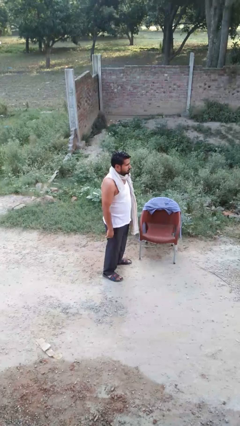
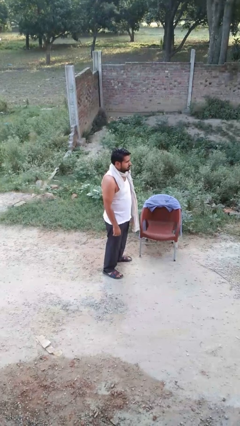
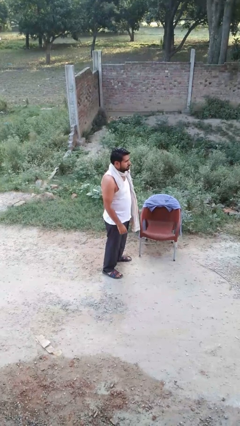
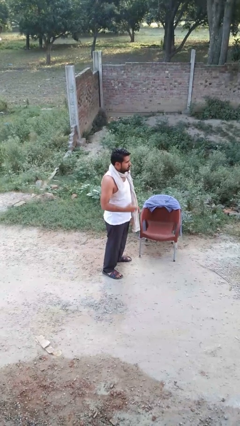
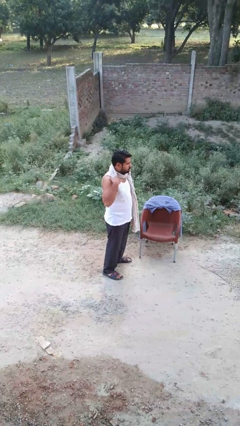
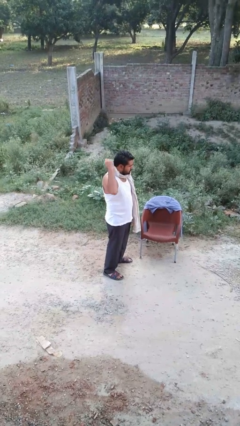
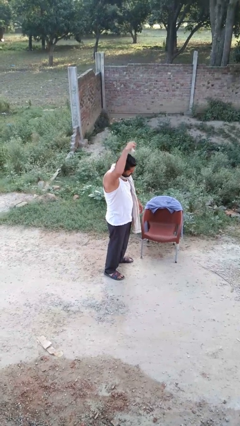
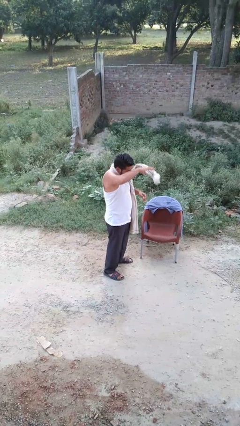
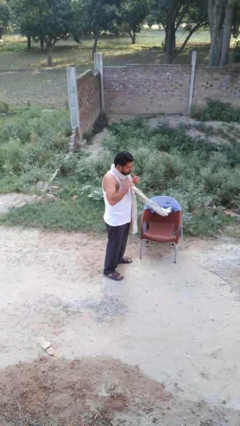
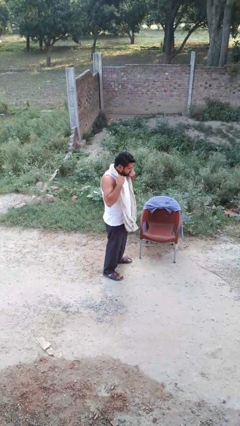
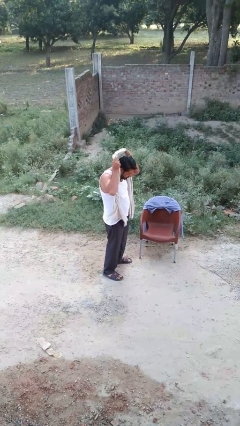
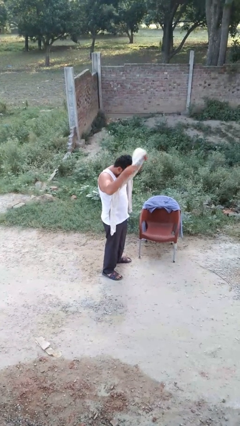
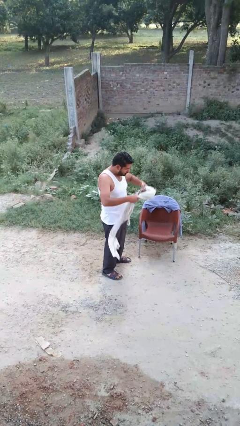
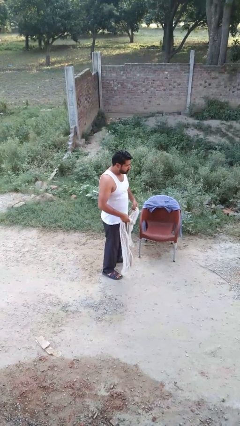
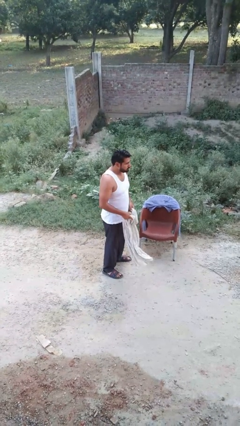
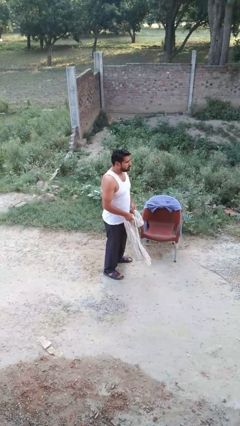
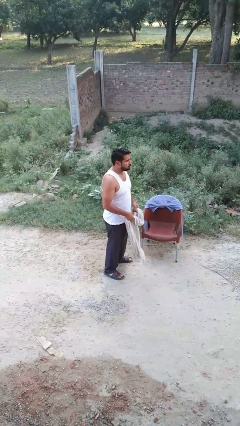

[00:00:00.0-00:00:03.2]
person takes off scarf

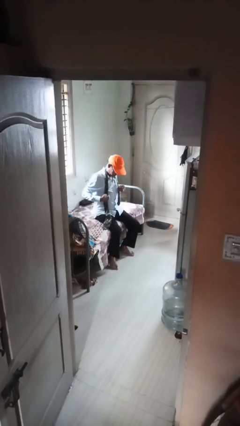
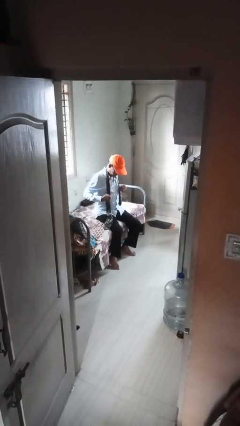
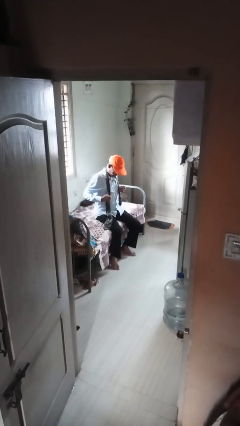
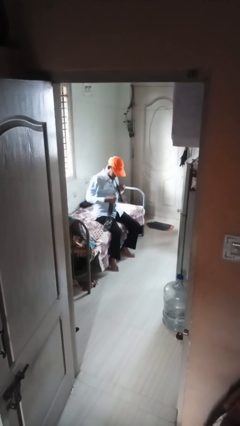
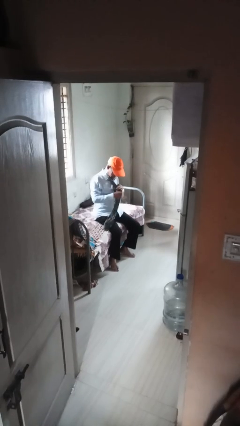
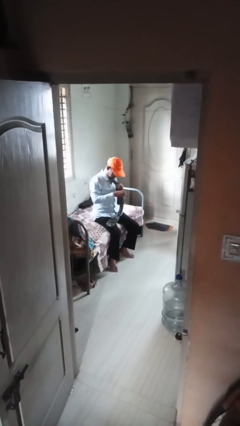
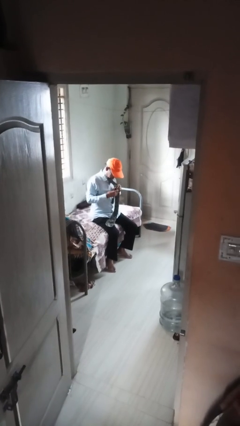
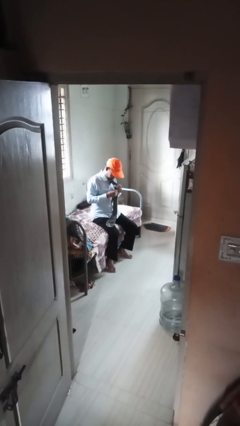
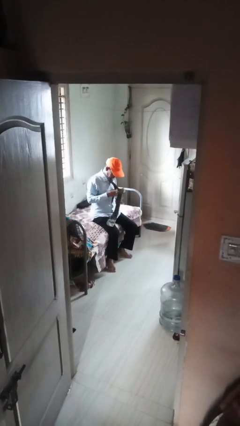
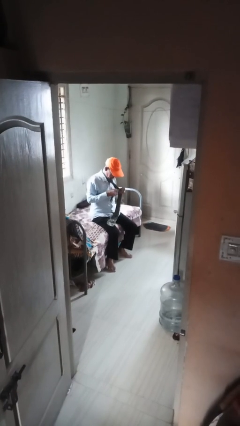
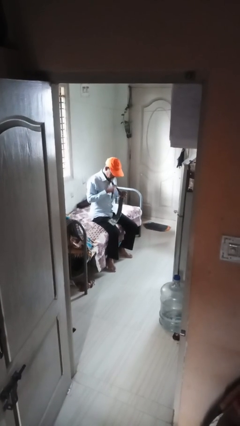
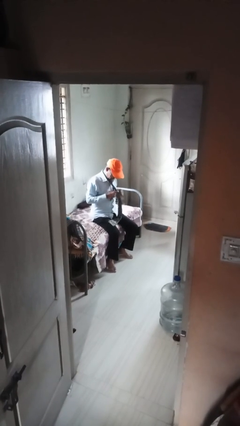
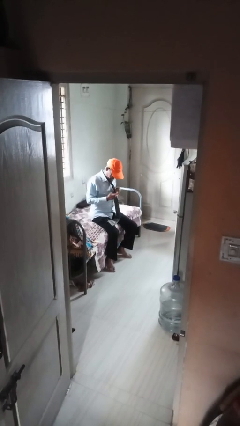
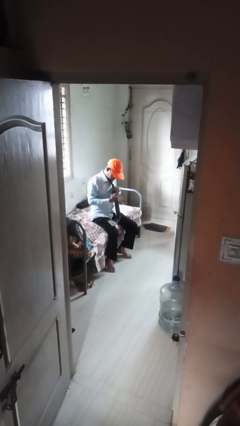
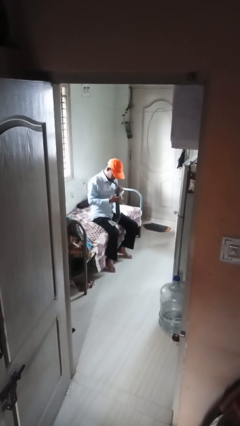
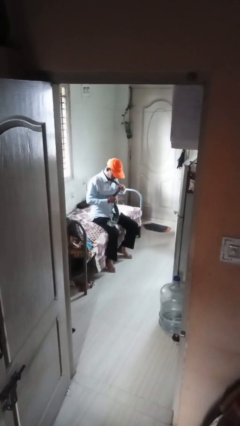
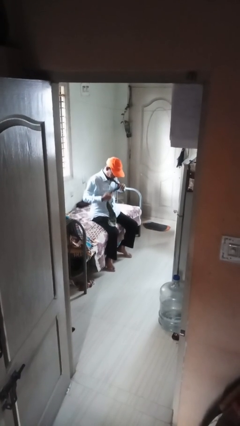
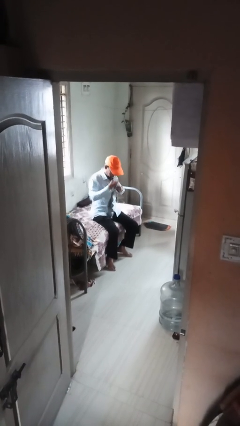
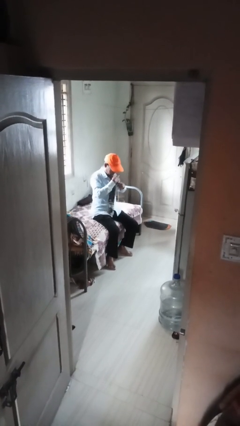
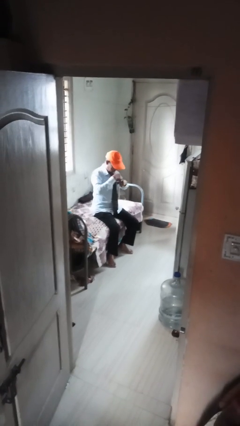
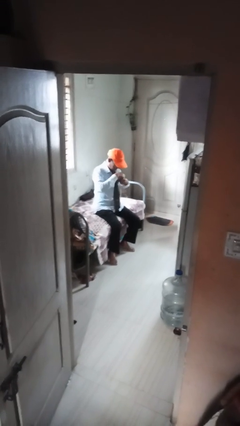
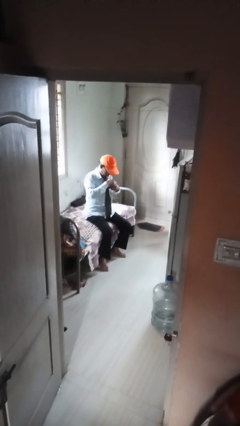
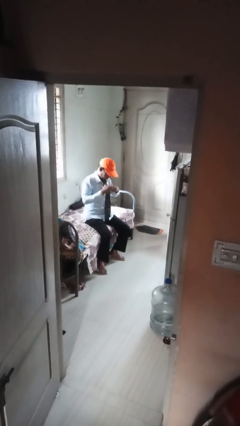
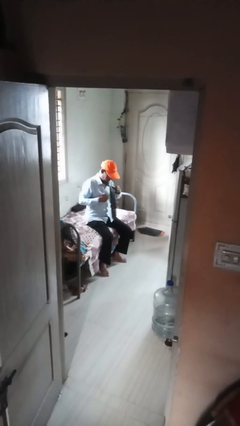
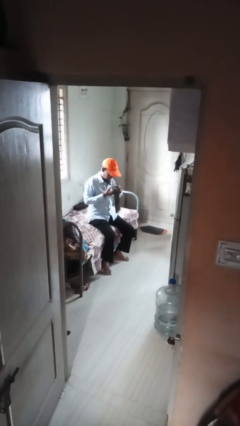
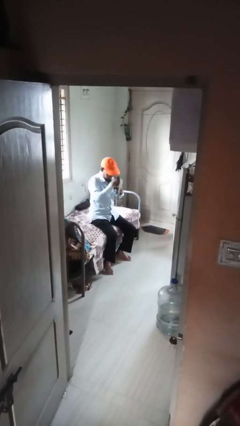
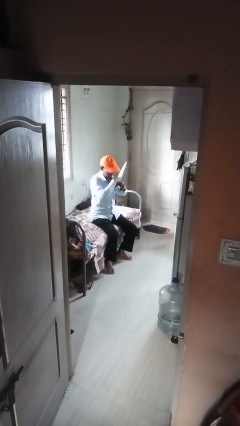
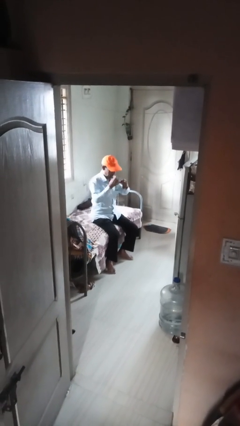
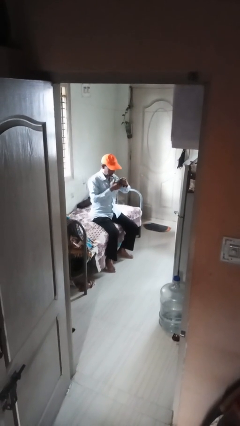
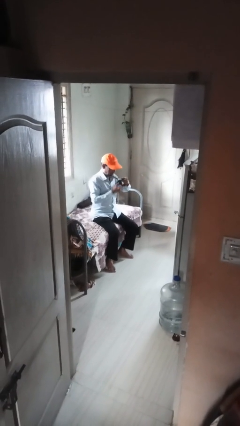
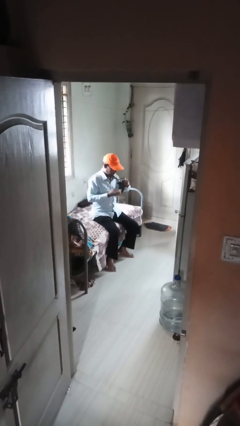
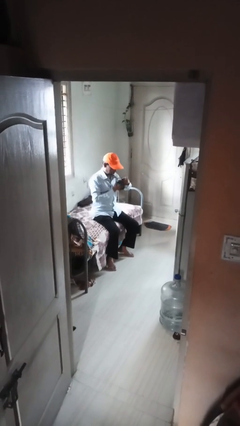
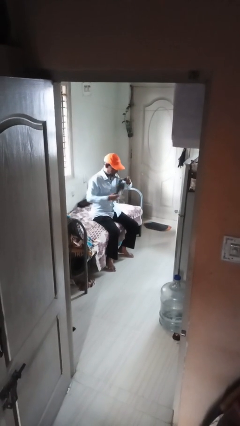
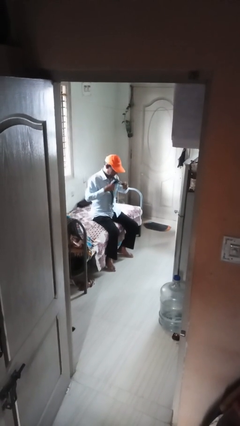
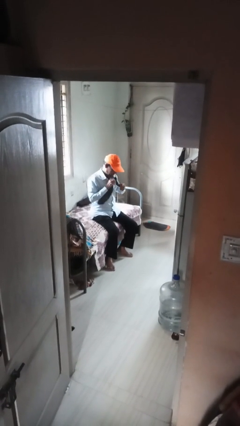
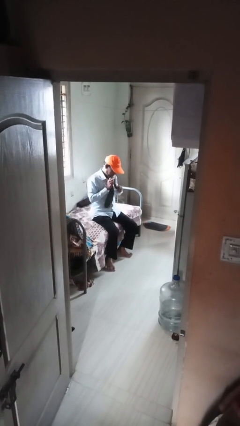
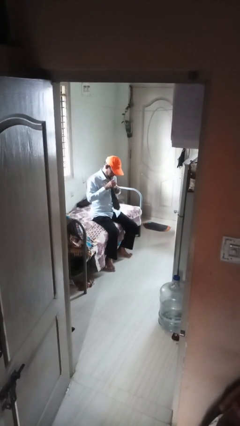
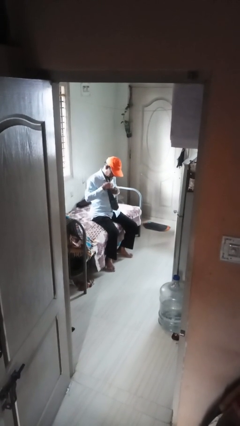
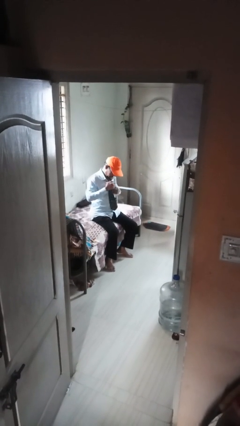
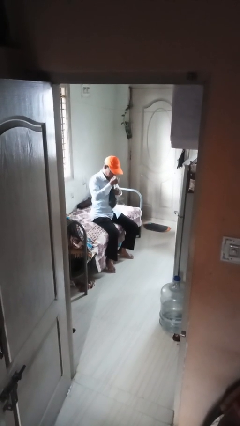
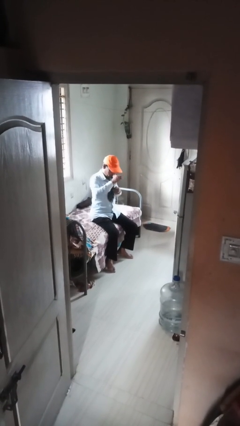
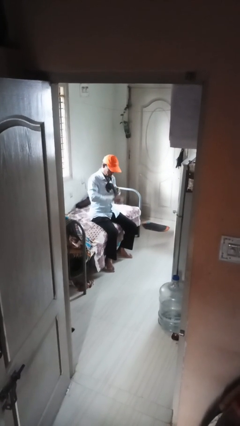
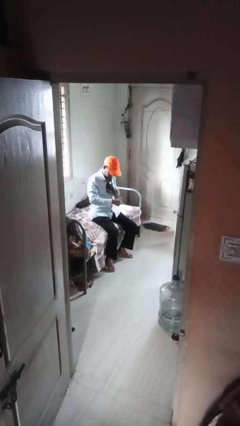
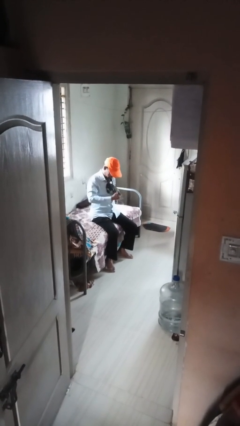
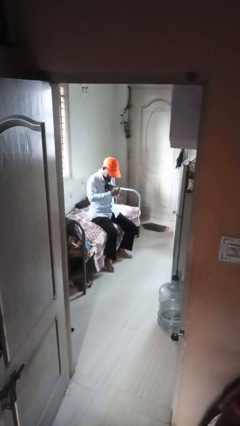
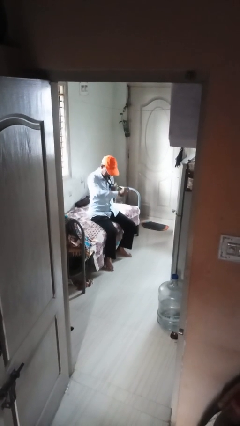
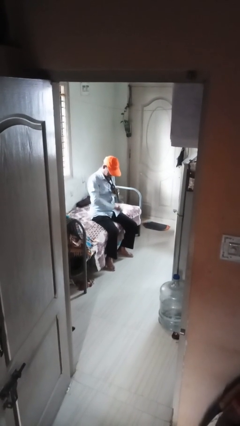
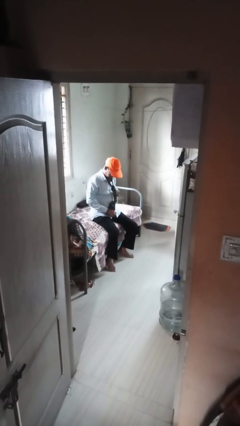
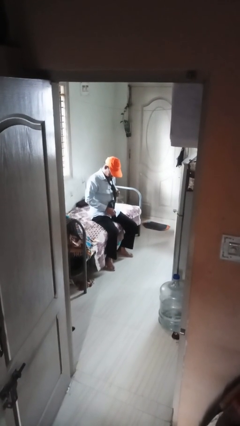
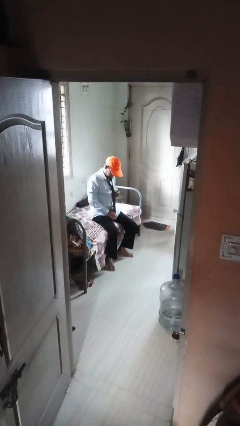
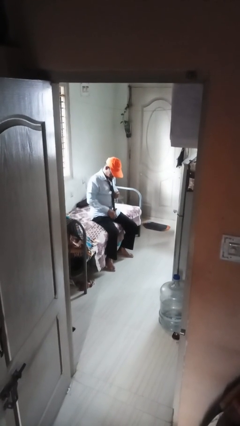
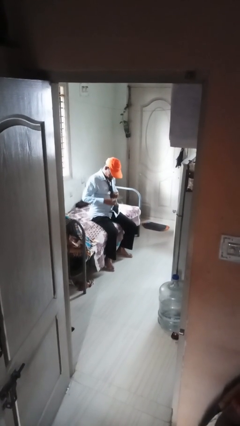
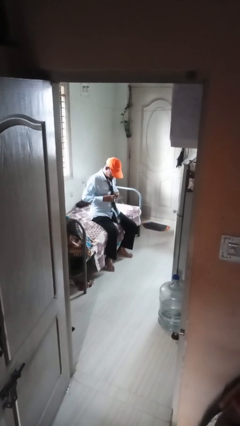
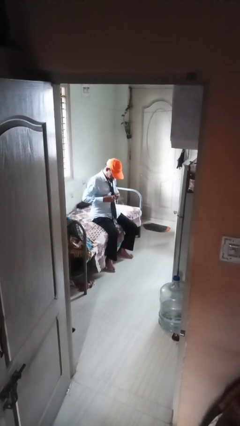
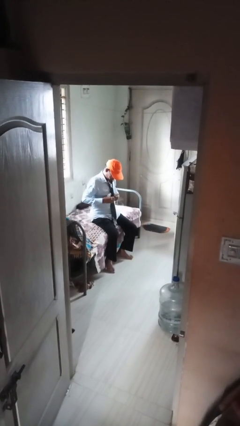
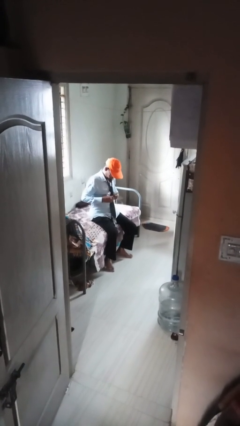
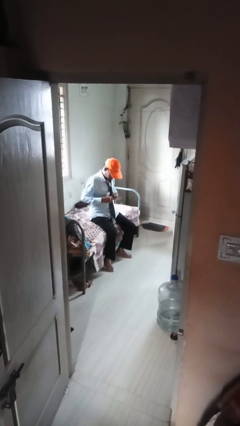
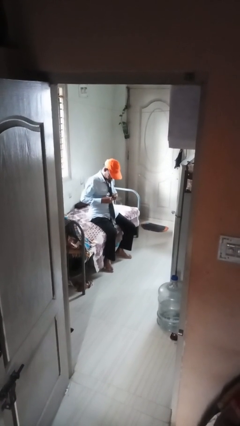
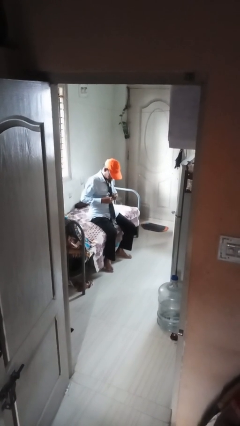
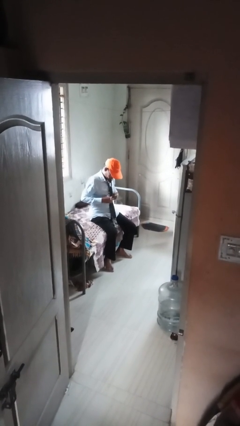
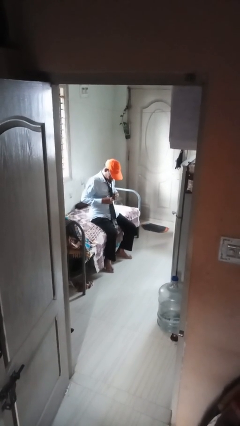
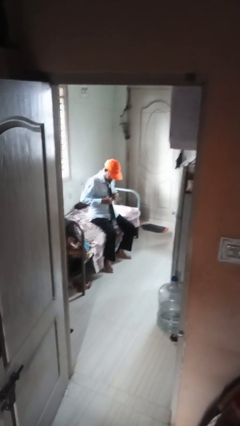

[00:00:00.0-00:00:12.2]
person puts on necktie

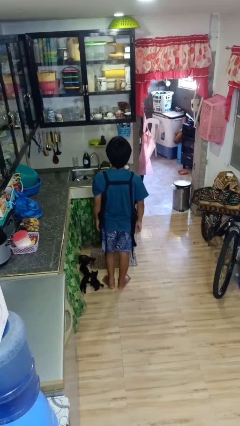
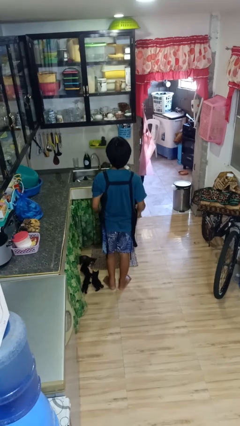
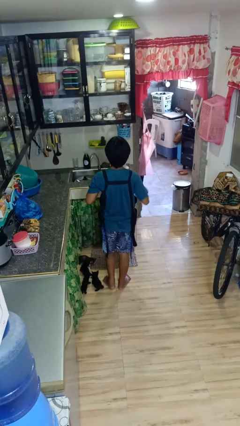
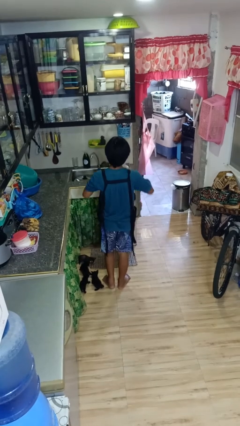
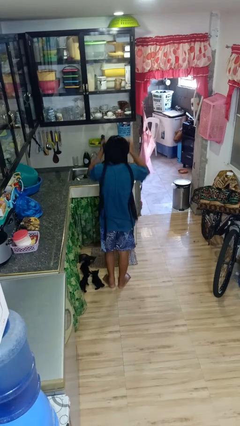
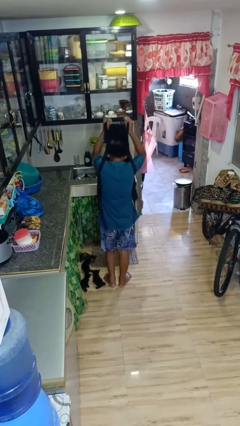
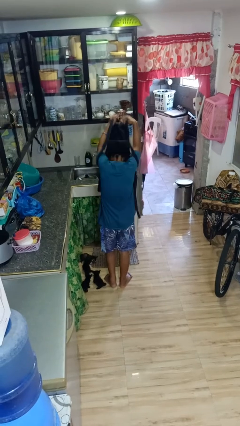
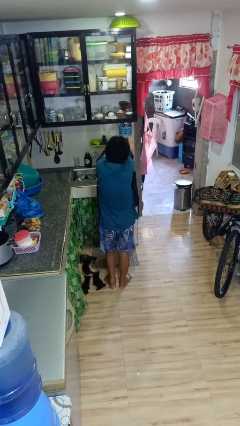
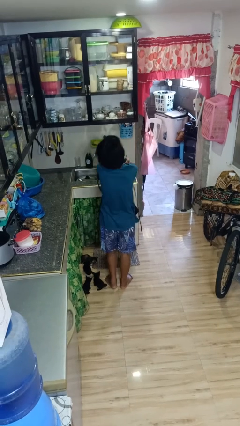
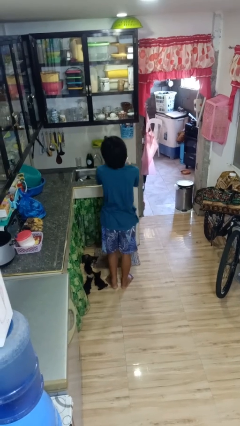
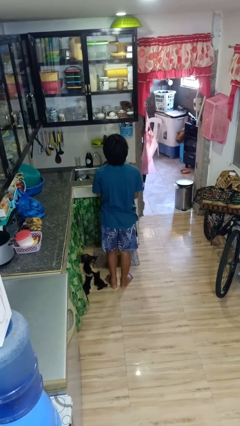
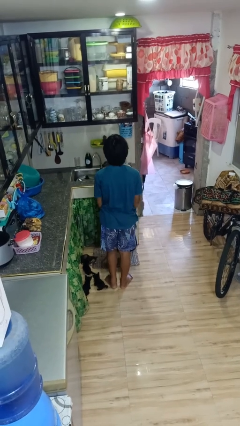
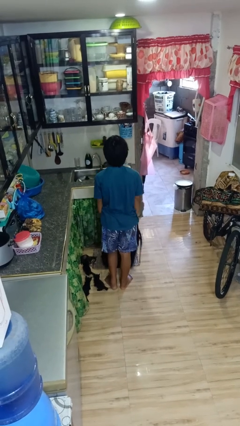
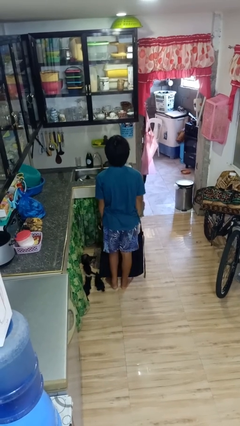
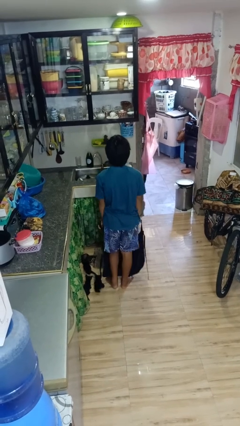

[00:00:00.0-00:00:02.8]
person takes off apron
